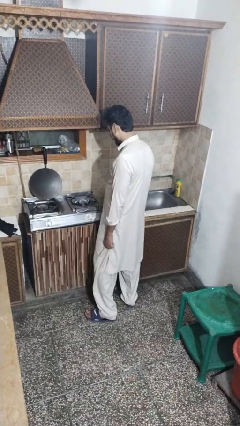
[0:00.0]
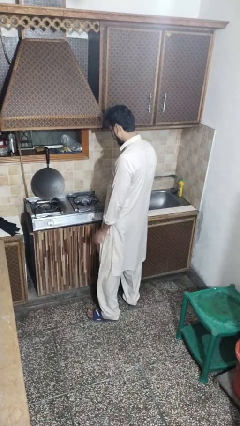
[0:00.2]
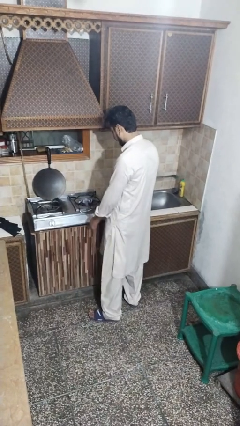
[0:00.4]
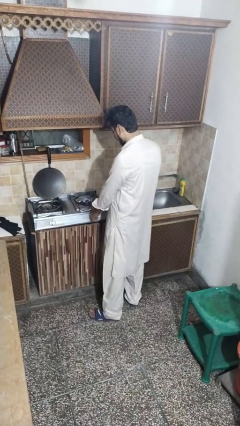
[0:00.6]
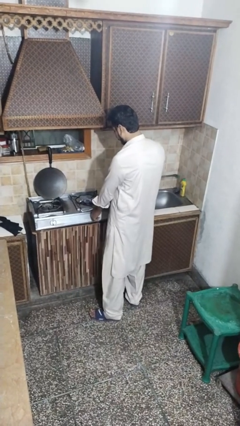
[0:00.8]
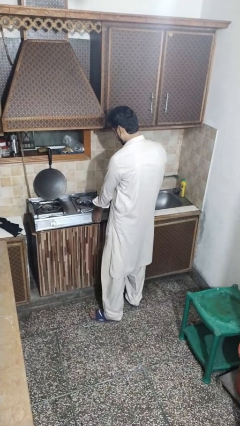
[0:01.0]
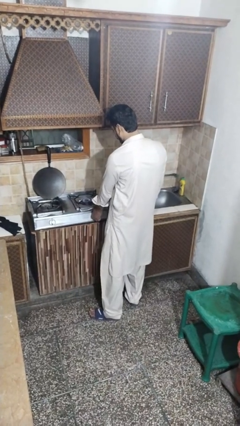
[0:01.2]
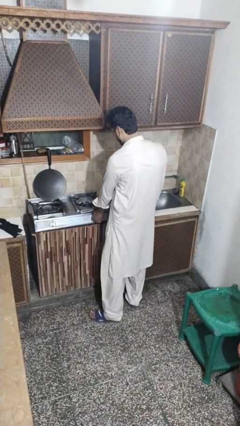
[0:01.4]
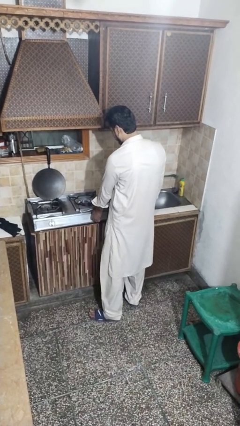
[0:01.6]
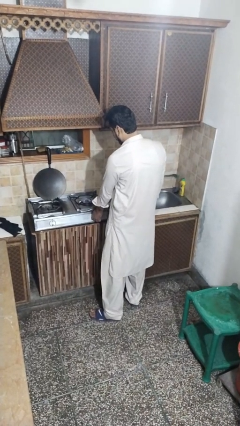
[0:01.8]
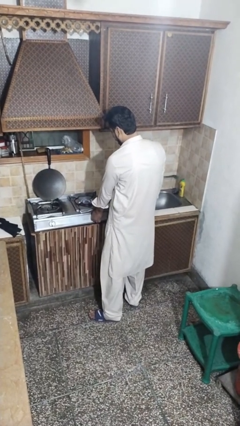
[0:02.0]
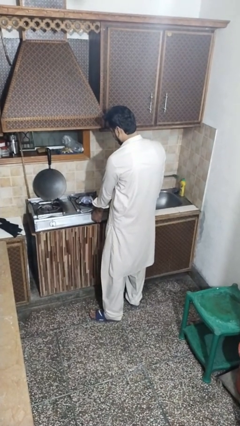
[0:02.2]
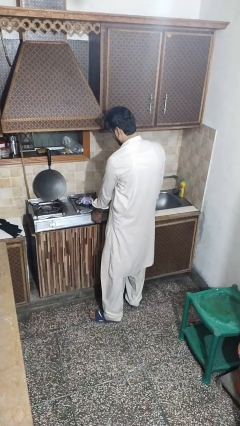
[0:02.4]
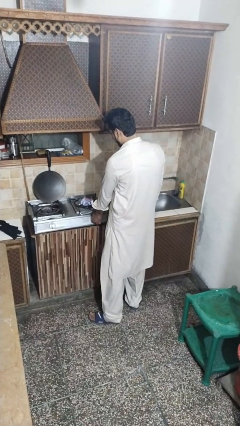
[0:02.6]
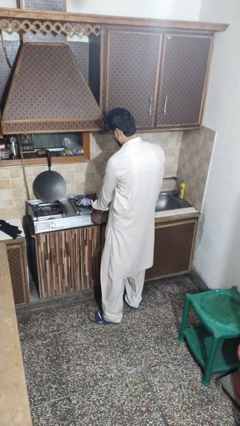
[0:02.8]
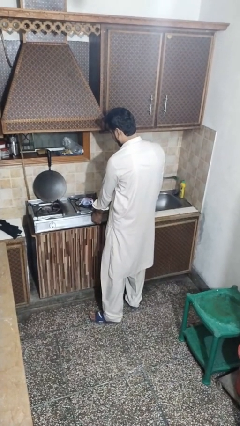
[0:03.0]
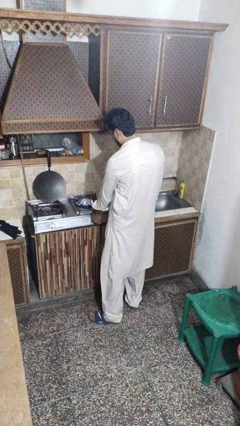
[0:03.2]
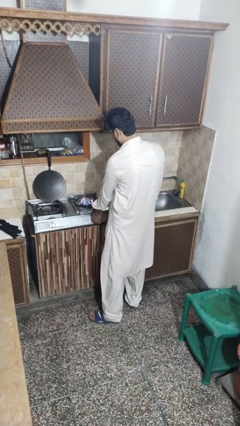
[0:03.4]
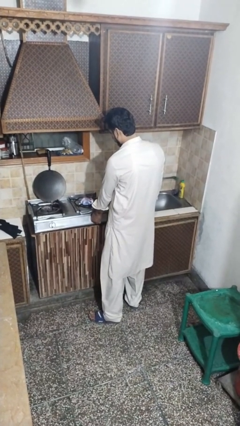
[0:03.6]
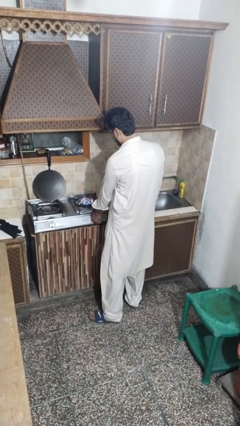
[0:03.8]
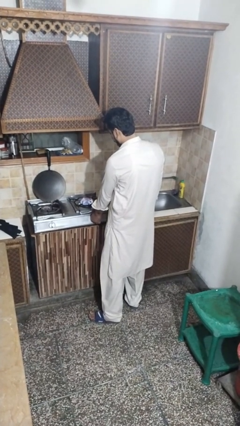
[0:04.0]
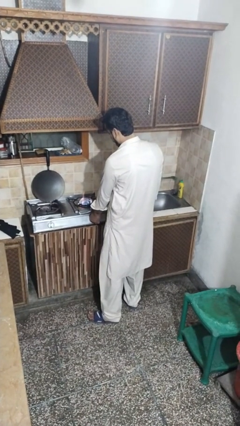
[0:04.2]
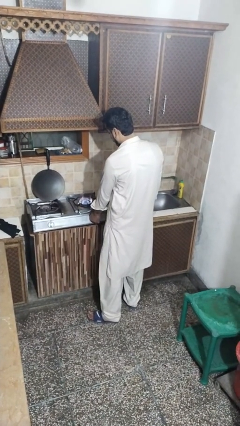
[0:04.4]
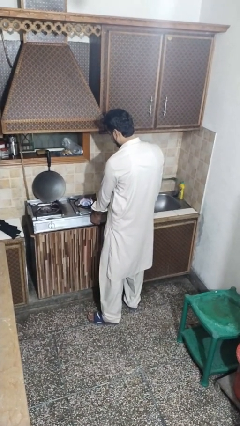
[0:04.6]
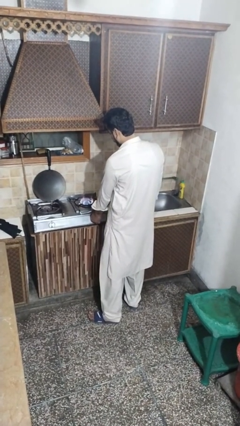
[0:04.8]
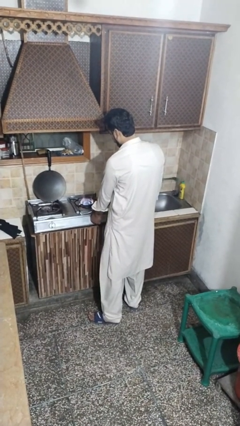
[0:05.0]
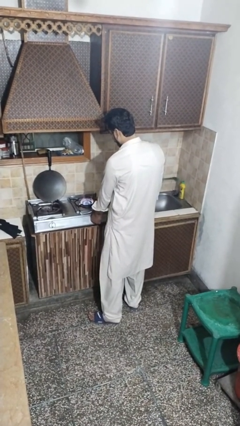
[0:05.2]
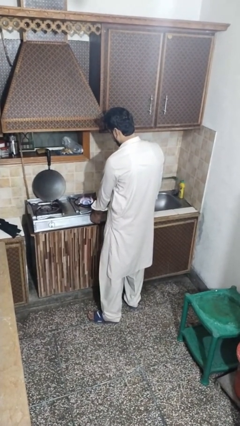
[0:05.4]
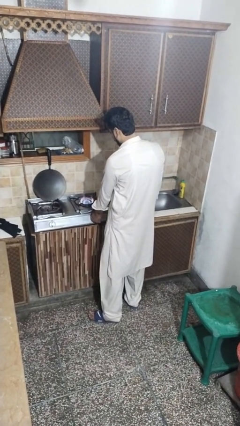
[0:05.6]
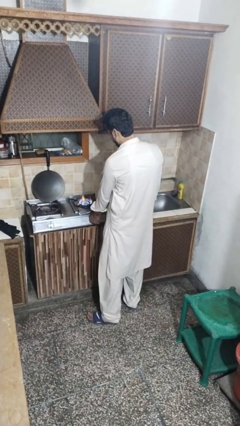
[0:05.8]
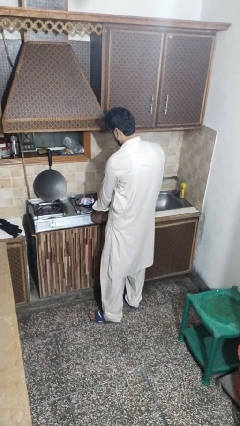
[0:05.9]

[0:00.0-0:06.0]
person turns on stovetop

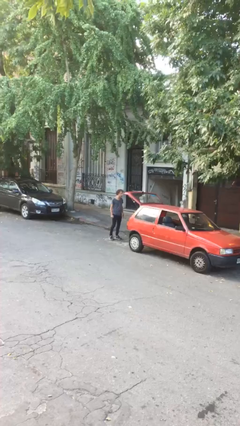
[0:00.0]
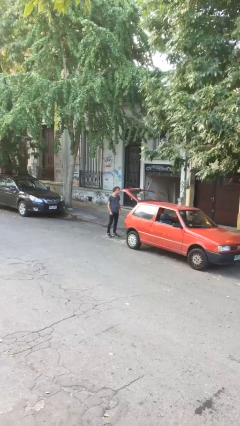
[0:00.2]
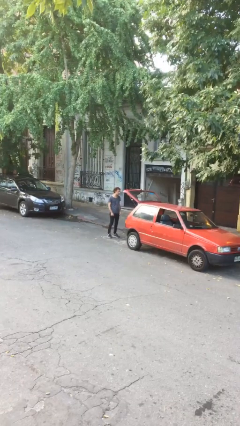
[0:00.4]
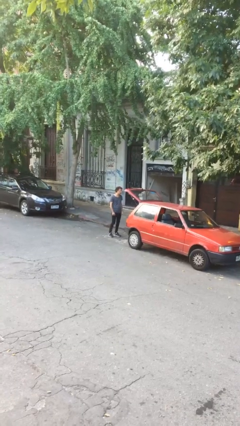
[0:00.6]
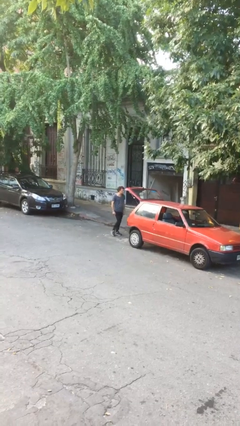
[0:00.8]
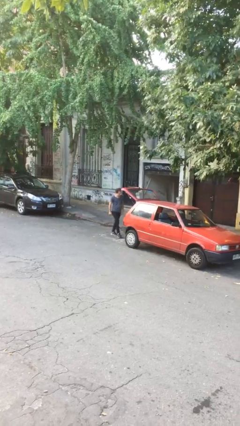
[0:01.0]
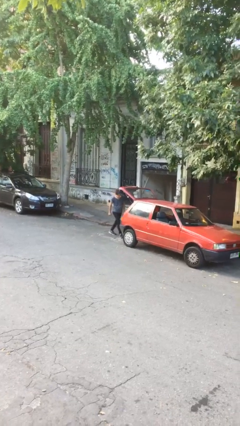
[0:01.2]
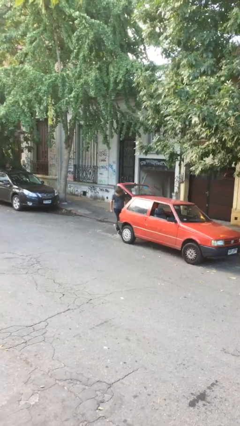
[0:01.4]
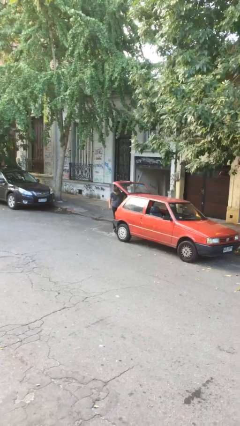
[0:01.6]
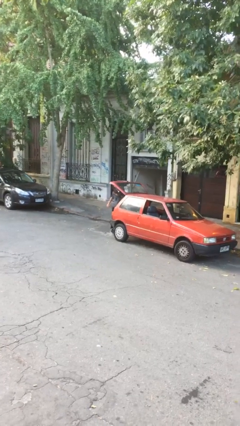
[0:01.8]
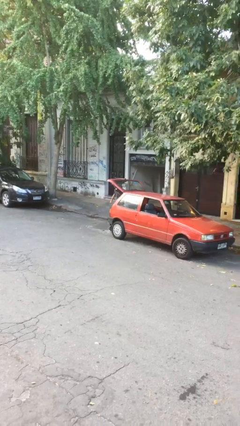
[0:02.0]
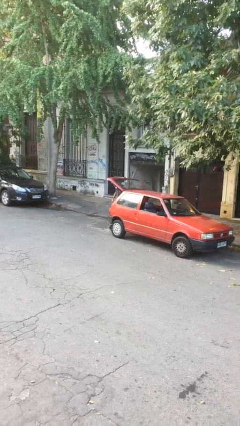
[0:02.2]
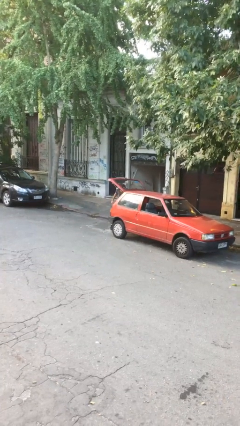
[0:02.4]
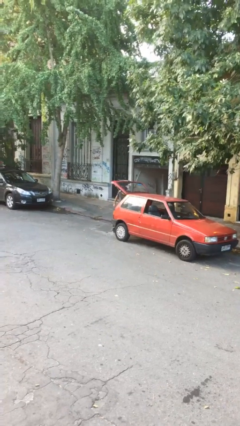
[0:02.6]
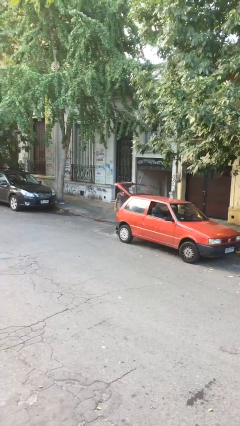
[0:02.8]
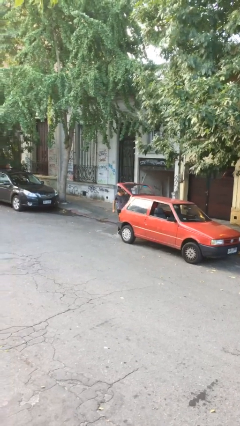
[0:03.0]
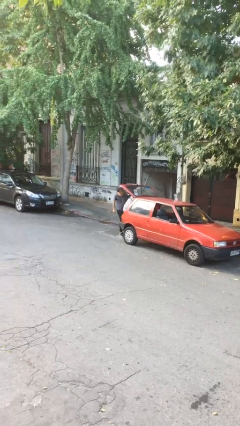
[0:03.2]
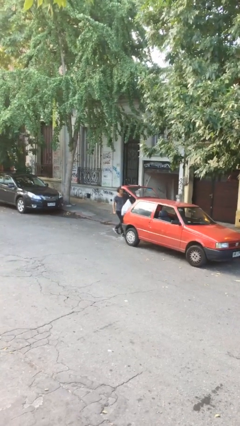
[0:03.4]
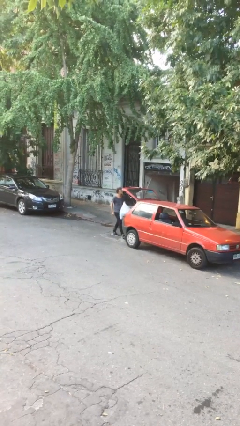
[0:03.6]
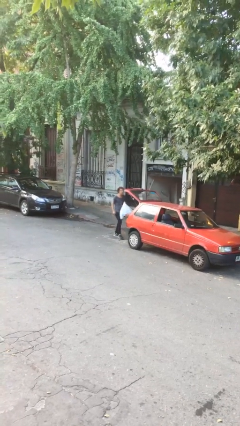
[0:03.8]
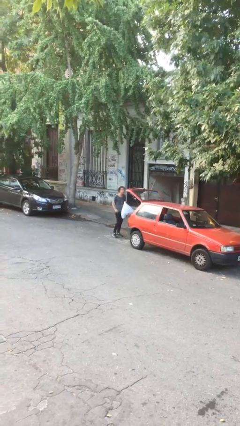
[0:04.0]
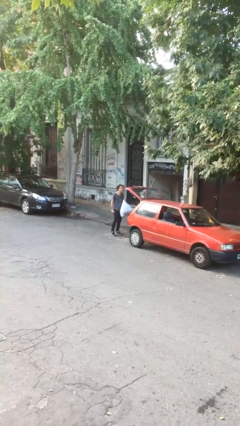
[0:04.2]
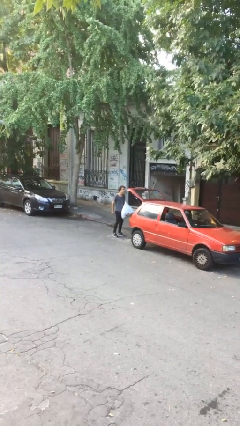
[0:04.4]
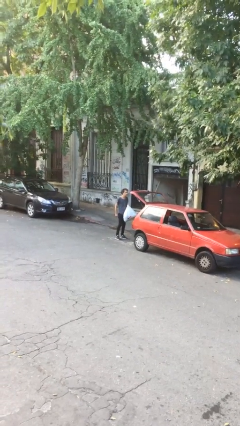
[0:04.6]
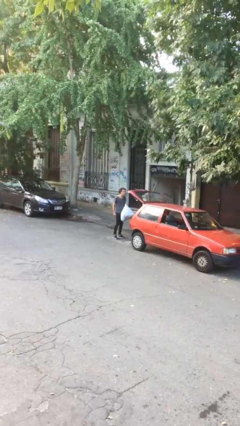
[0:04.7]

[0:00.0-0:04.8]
person unloads car

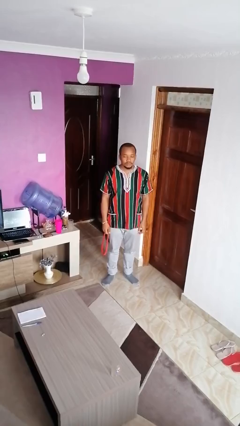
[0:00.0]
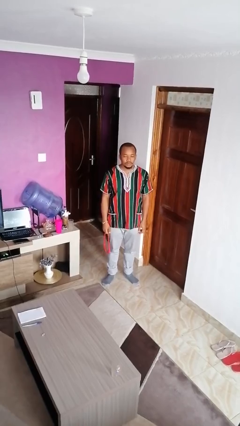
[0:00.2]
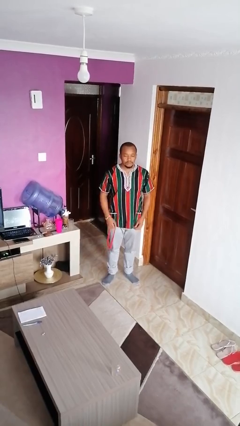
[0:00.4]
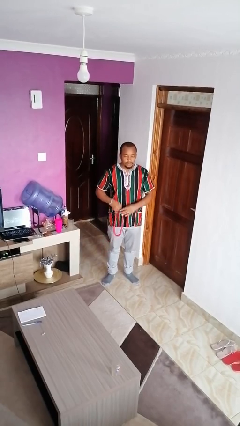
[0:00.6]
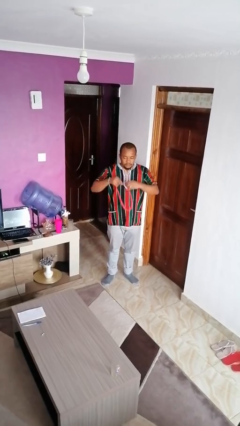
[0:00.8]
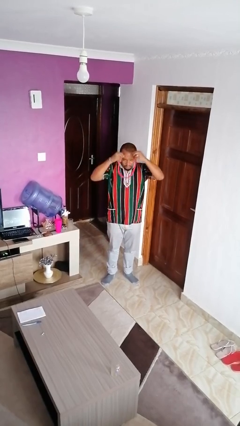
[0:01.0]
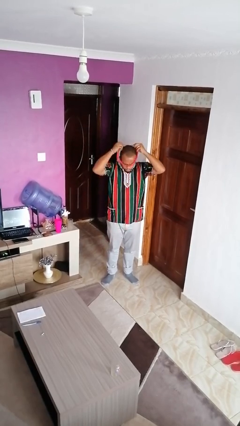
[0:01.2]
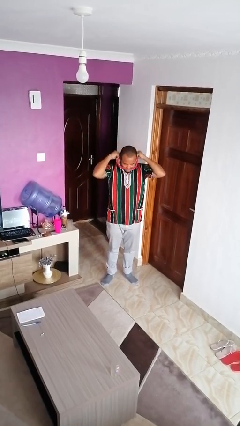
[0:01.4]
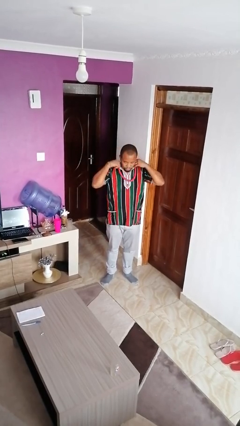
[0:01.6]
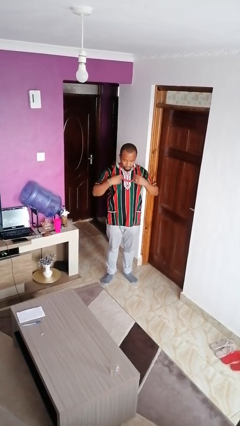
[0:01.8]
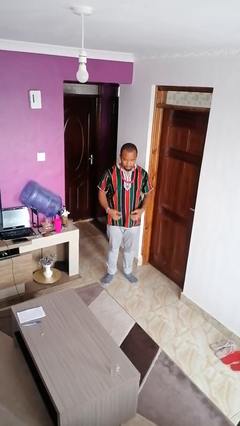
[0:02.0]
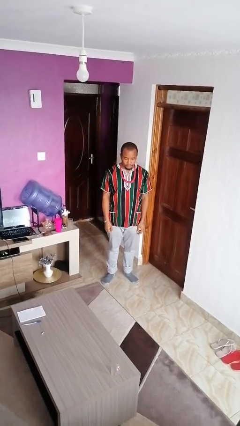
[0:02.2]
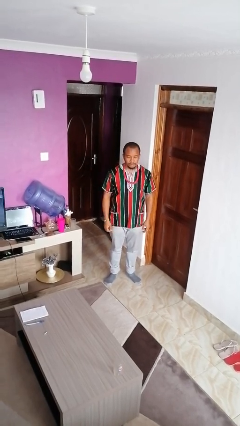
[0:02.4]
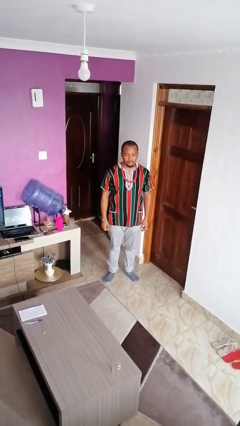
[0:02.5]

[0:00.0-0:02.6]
person puts on necklace

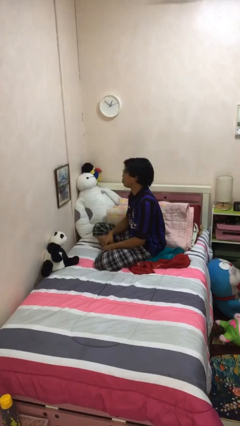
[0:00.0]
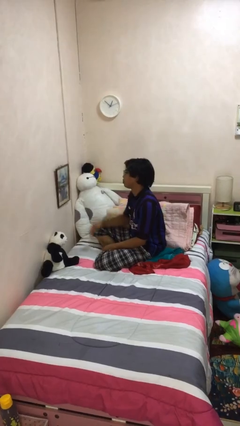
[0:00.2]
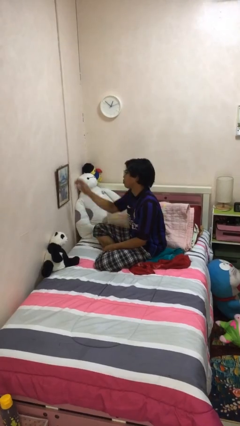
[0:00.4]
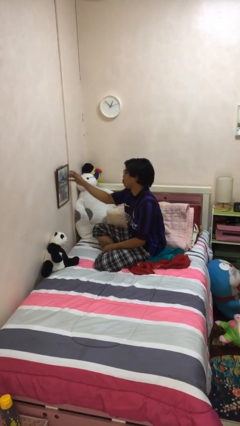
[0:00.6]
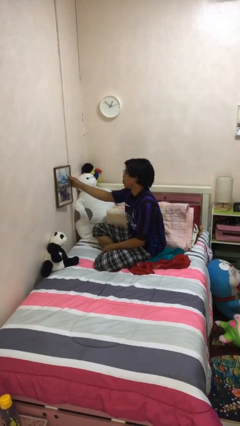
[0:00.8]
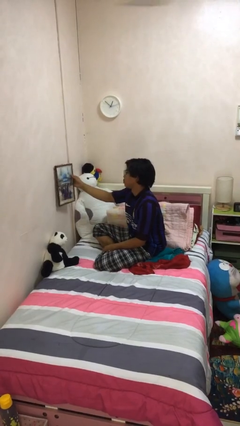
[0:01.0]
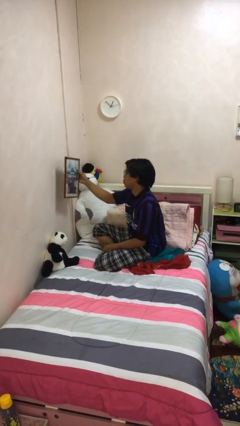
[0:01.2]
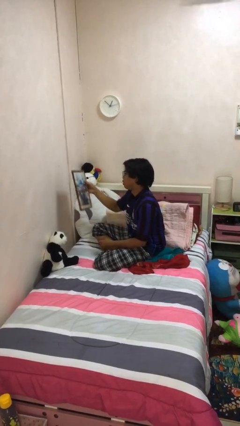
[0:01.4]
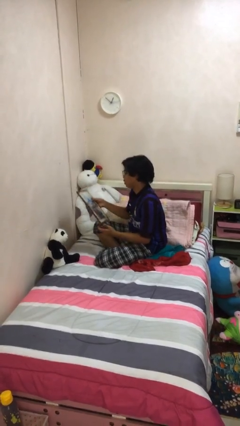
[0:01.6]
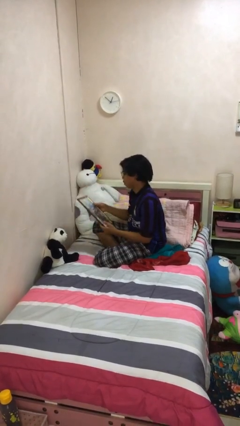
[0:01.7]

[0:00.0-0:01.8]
person takes down picture frame

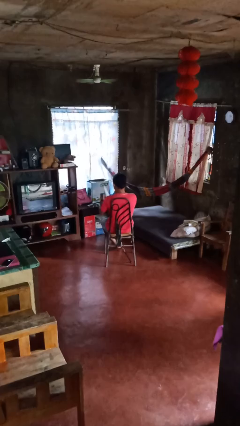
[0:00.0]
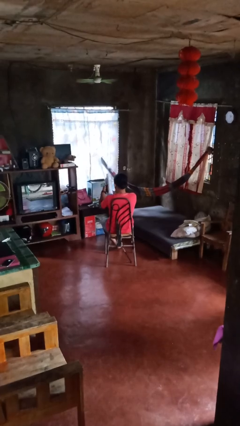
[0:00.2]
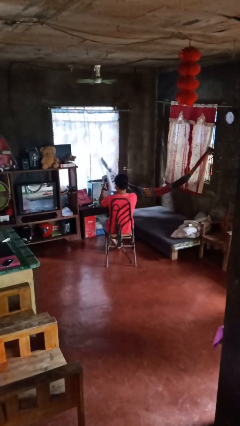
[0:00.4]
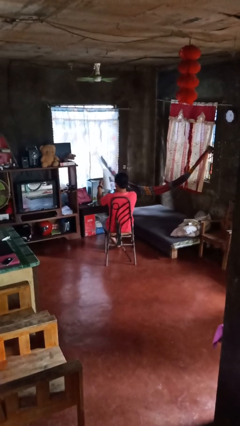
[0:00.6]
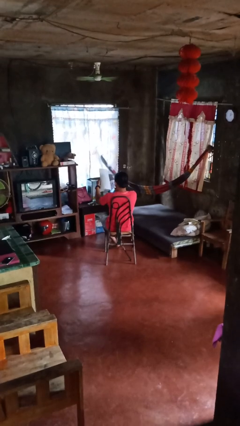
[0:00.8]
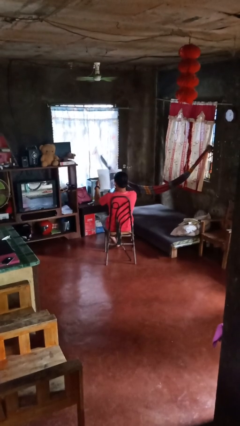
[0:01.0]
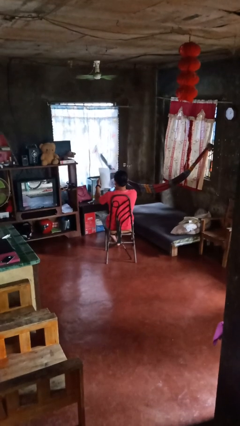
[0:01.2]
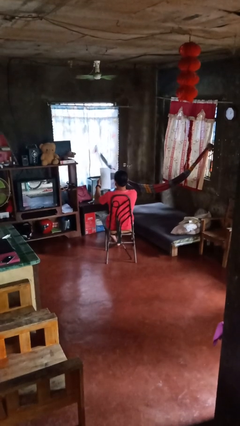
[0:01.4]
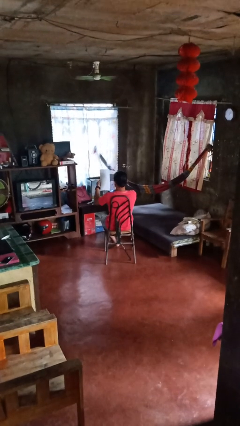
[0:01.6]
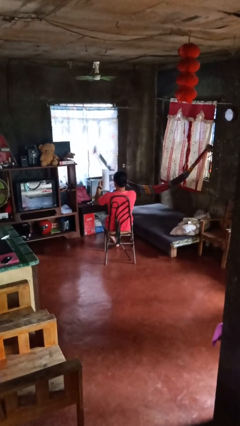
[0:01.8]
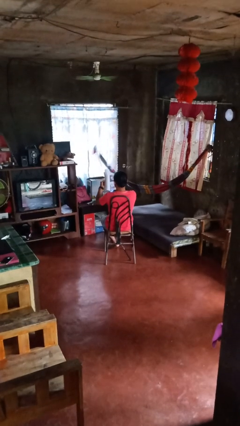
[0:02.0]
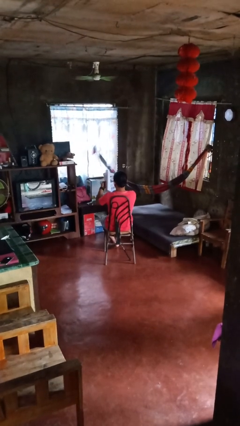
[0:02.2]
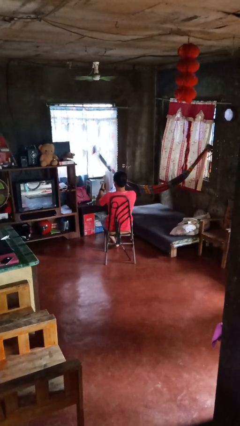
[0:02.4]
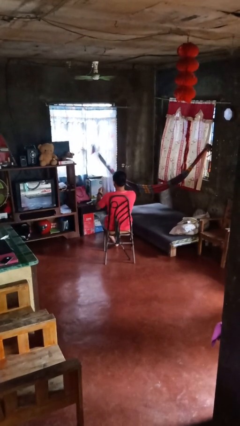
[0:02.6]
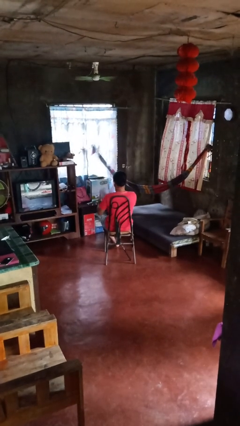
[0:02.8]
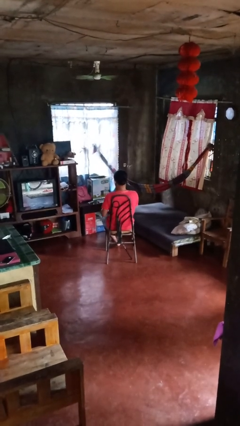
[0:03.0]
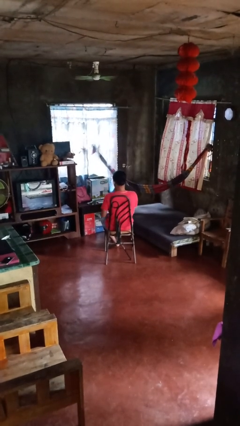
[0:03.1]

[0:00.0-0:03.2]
person reads newspaper
